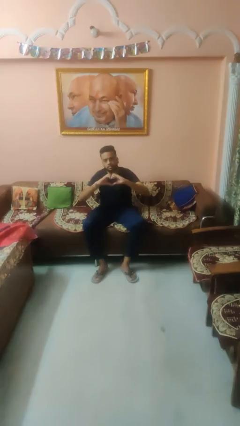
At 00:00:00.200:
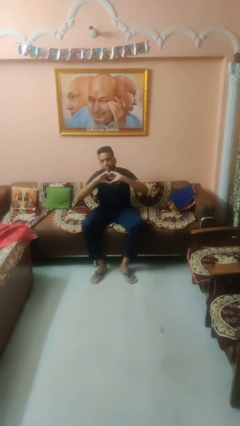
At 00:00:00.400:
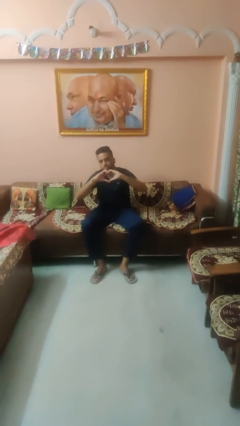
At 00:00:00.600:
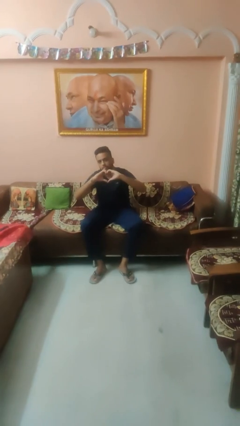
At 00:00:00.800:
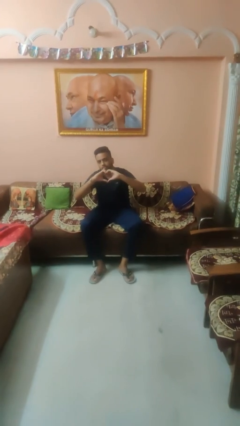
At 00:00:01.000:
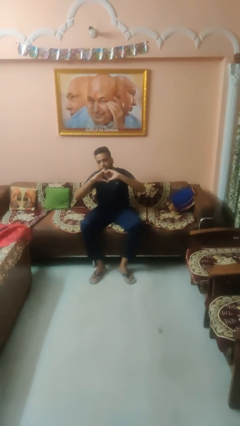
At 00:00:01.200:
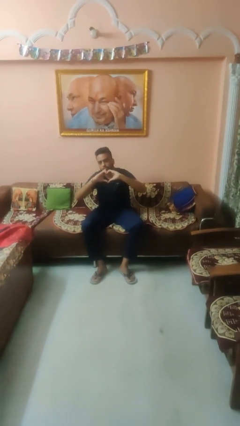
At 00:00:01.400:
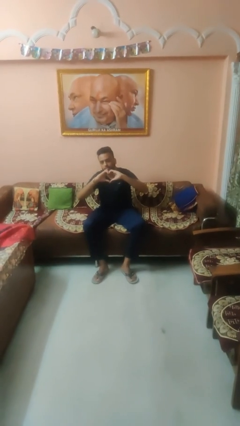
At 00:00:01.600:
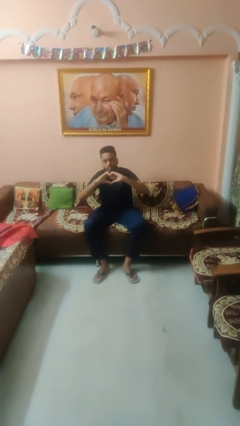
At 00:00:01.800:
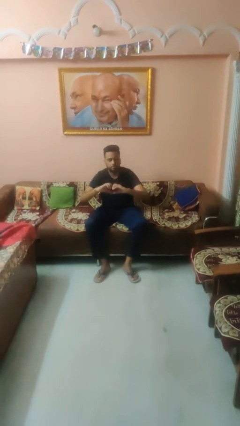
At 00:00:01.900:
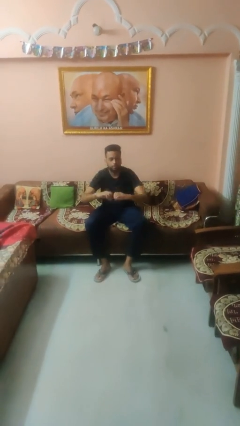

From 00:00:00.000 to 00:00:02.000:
person gestures heart

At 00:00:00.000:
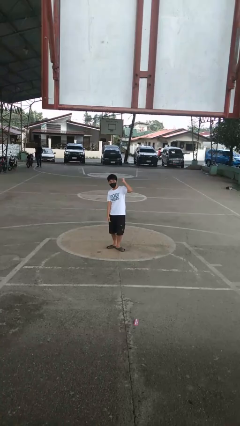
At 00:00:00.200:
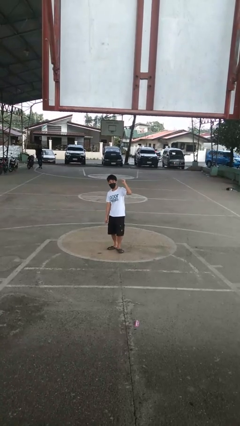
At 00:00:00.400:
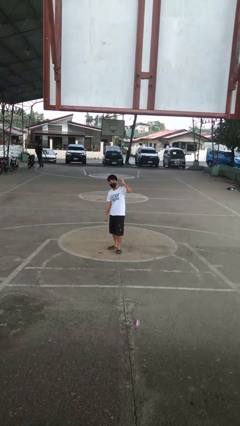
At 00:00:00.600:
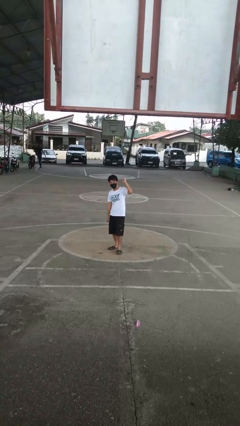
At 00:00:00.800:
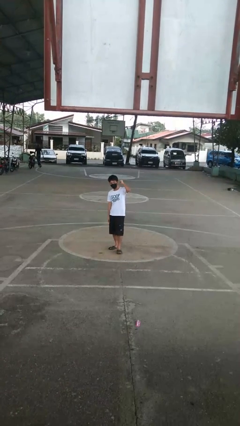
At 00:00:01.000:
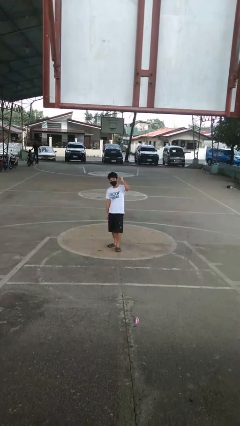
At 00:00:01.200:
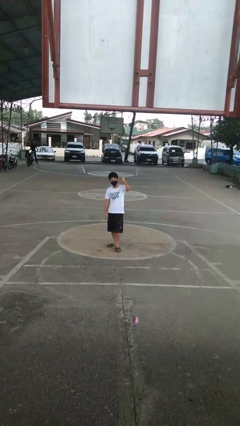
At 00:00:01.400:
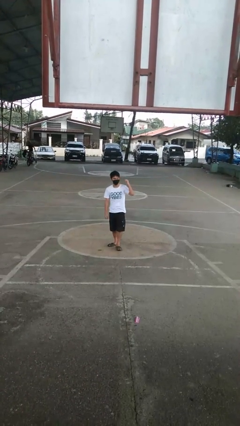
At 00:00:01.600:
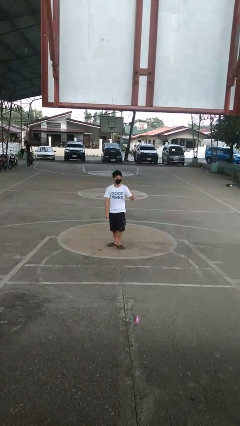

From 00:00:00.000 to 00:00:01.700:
person gestures behind me

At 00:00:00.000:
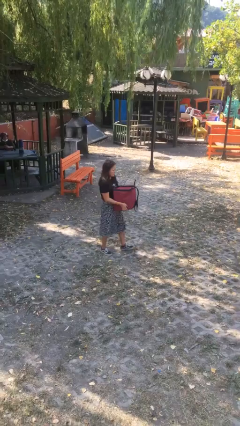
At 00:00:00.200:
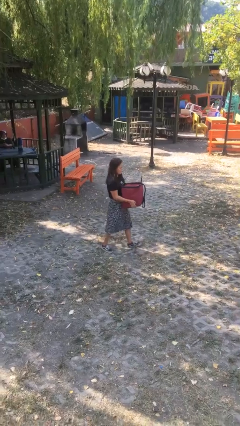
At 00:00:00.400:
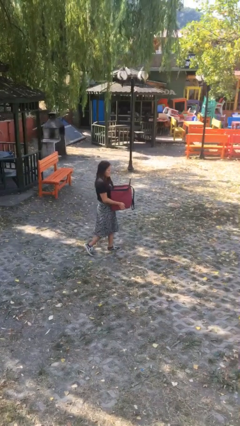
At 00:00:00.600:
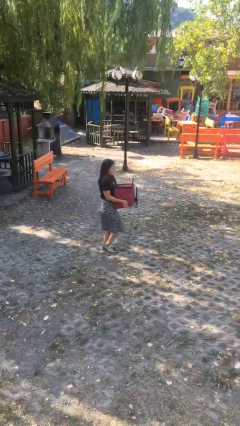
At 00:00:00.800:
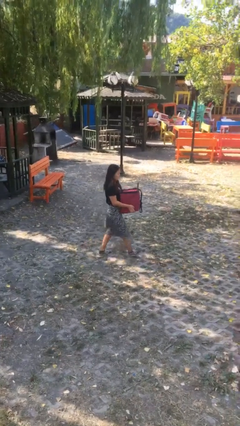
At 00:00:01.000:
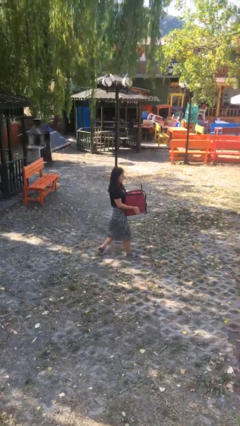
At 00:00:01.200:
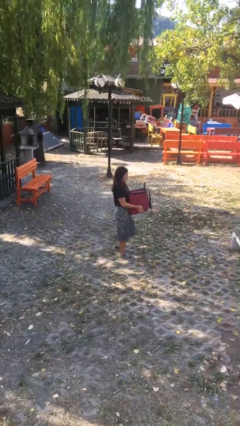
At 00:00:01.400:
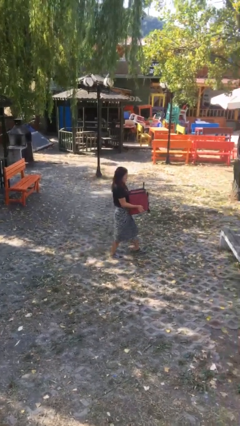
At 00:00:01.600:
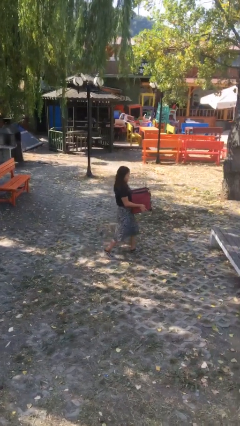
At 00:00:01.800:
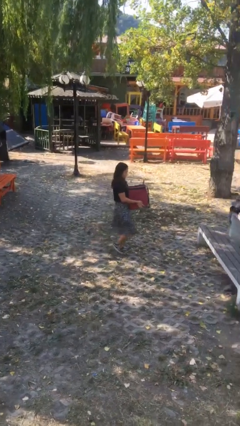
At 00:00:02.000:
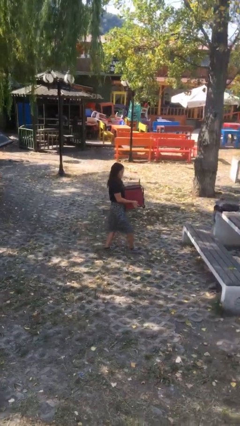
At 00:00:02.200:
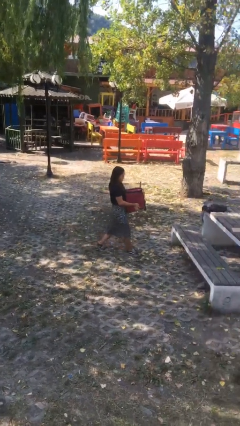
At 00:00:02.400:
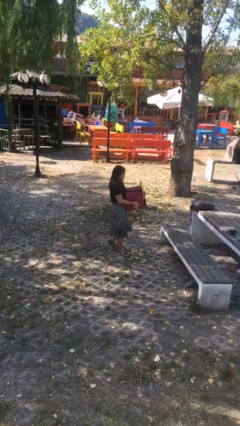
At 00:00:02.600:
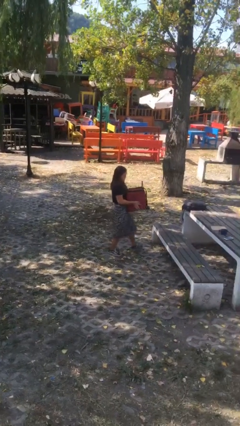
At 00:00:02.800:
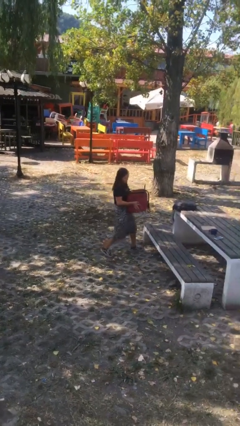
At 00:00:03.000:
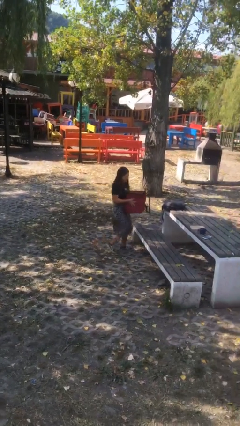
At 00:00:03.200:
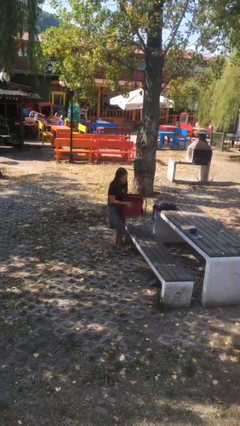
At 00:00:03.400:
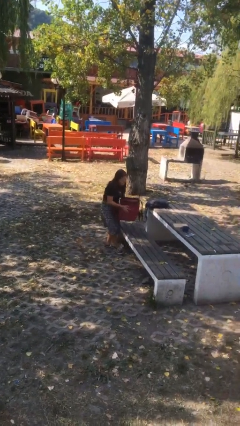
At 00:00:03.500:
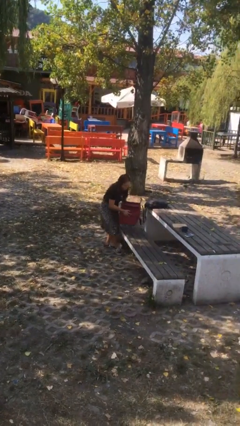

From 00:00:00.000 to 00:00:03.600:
person carries heavy object

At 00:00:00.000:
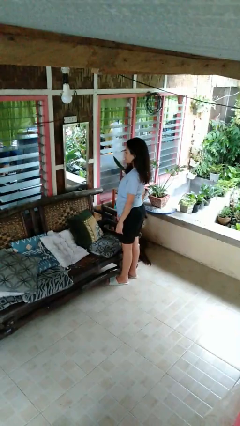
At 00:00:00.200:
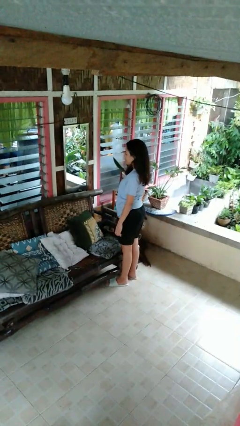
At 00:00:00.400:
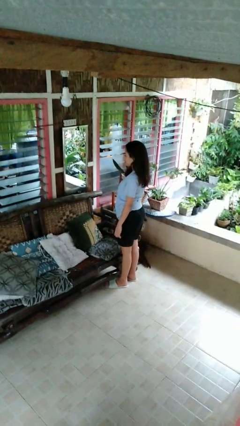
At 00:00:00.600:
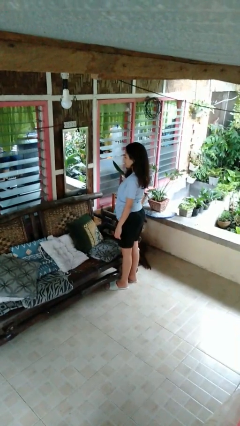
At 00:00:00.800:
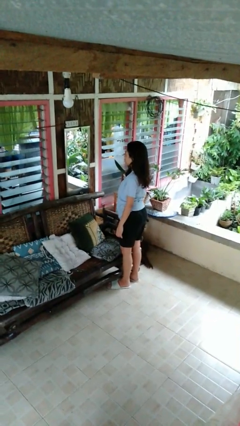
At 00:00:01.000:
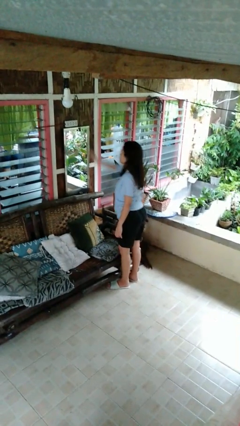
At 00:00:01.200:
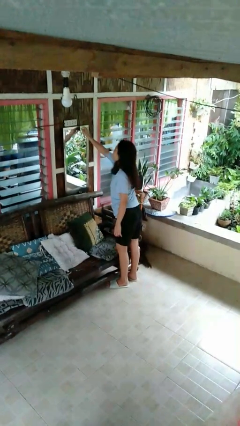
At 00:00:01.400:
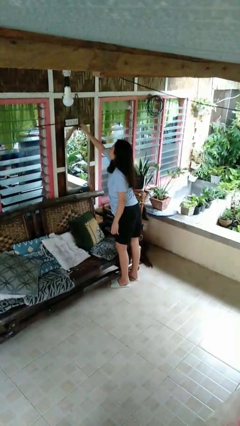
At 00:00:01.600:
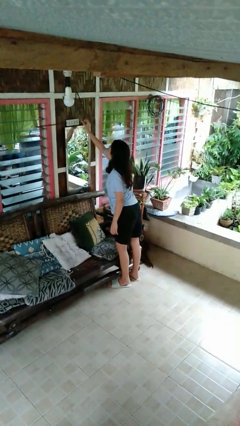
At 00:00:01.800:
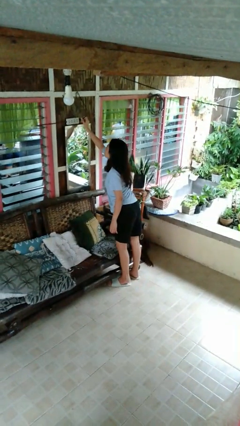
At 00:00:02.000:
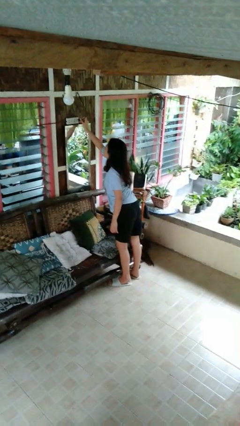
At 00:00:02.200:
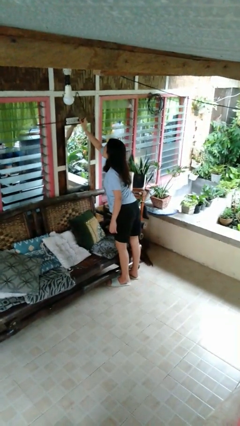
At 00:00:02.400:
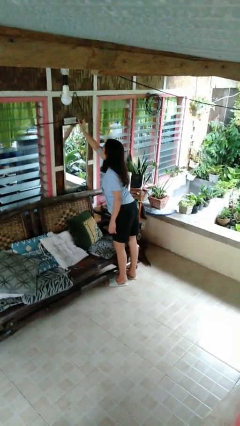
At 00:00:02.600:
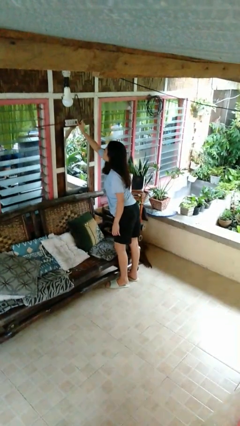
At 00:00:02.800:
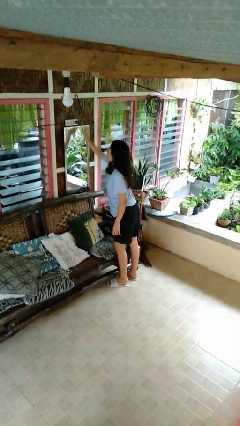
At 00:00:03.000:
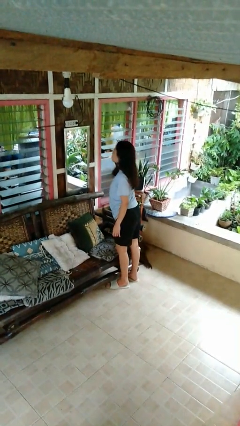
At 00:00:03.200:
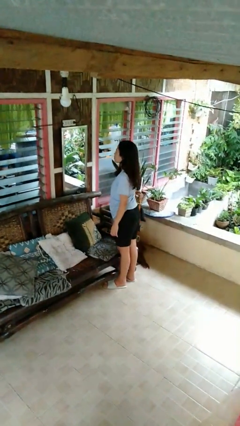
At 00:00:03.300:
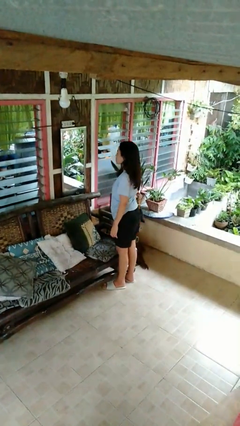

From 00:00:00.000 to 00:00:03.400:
person plugs into electrical socket

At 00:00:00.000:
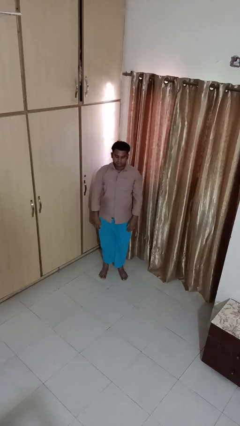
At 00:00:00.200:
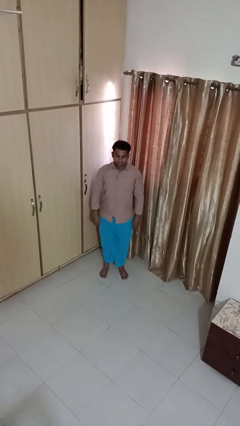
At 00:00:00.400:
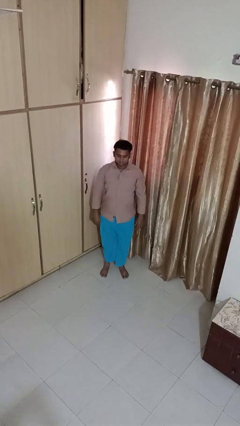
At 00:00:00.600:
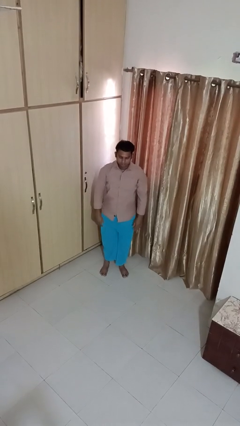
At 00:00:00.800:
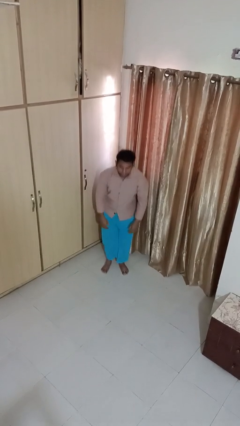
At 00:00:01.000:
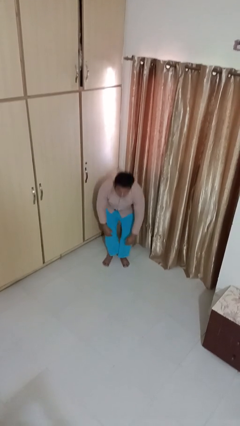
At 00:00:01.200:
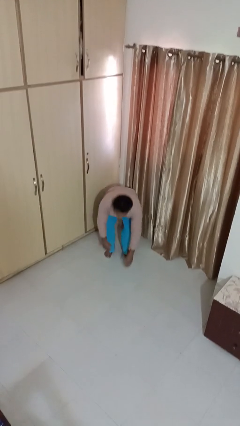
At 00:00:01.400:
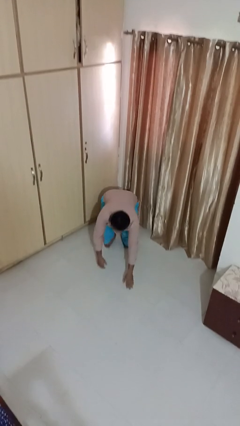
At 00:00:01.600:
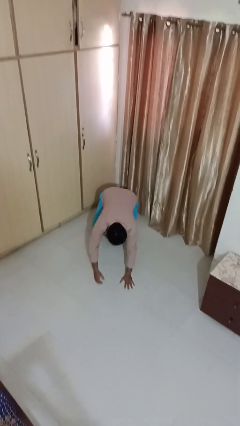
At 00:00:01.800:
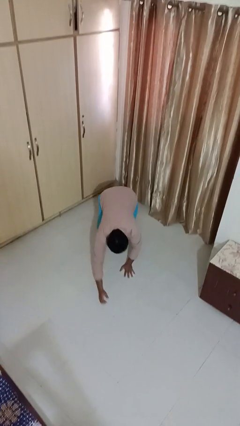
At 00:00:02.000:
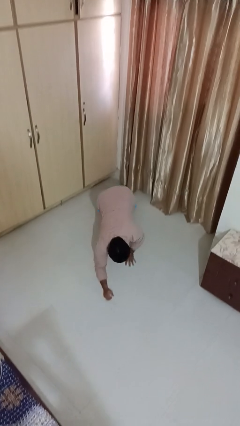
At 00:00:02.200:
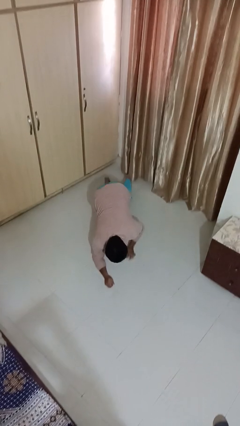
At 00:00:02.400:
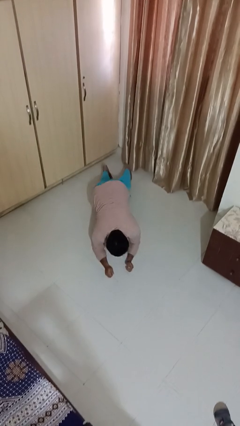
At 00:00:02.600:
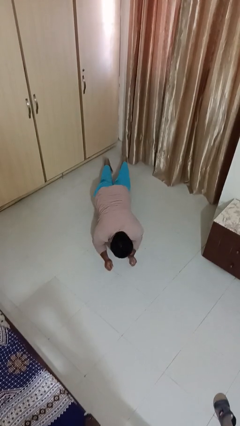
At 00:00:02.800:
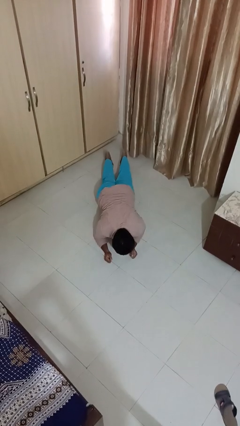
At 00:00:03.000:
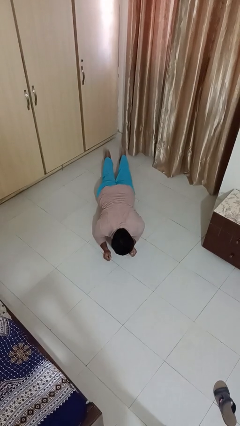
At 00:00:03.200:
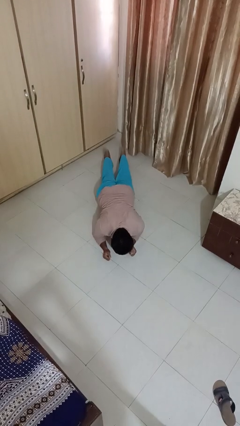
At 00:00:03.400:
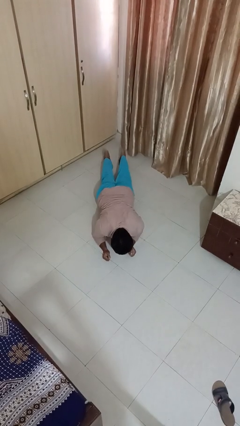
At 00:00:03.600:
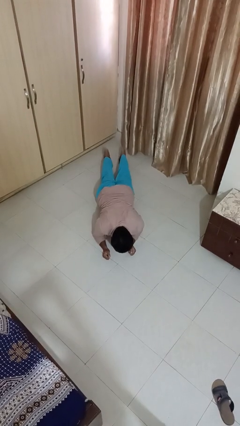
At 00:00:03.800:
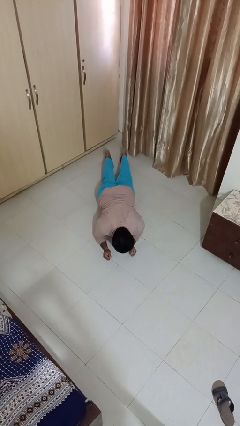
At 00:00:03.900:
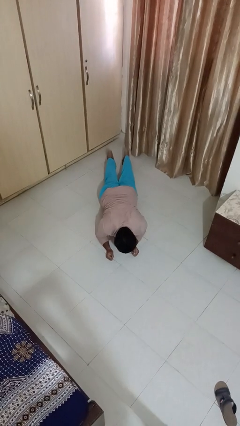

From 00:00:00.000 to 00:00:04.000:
person exercises with plank

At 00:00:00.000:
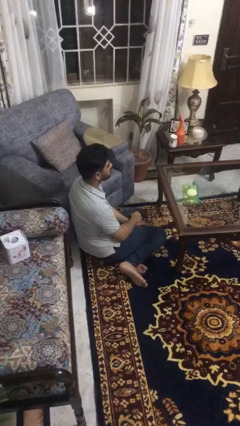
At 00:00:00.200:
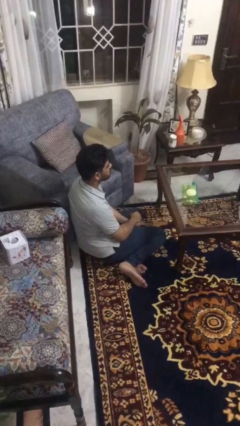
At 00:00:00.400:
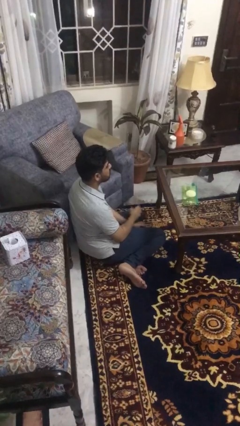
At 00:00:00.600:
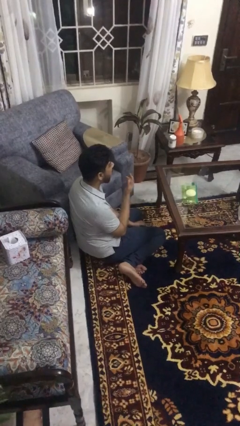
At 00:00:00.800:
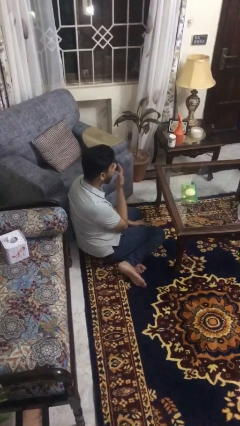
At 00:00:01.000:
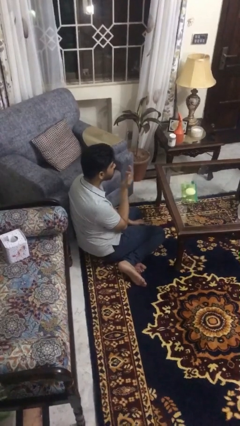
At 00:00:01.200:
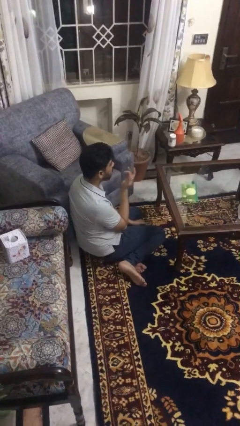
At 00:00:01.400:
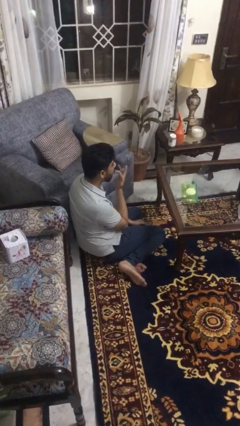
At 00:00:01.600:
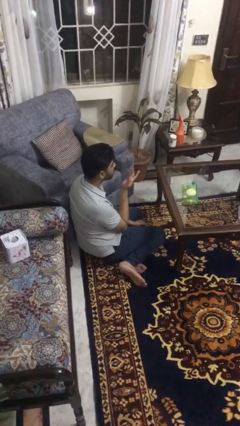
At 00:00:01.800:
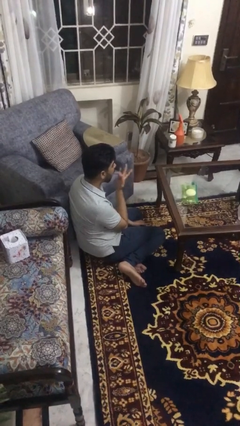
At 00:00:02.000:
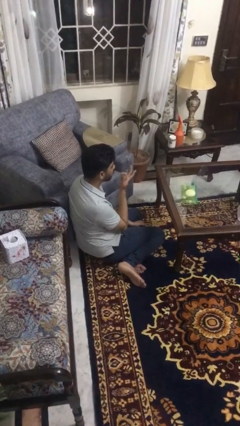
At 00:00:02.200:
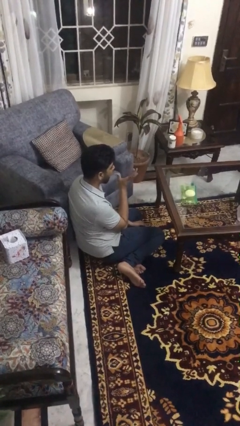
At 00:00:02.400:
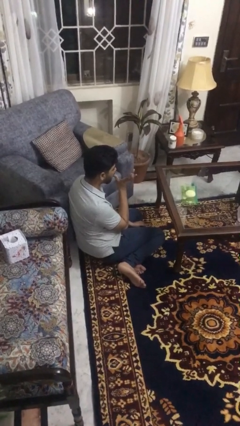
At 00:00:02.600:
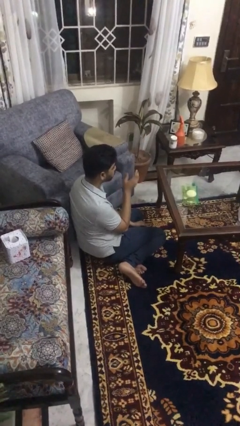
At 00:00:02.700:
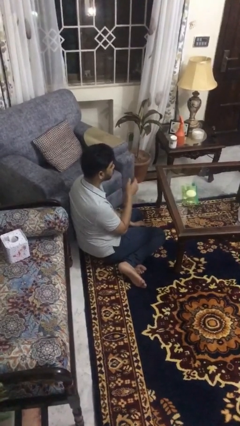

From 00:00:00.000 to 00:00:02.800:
person licks fingers
